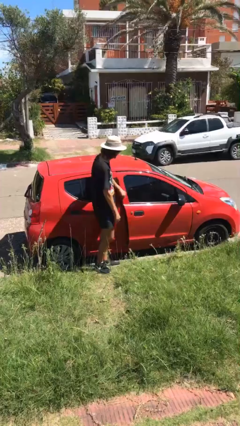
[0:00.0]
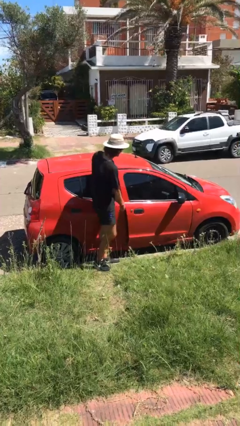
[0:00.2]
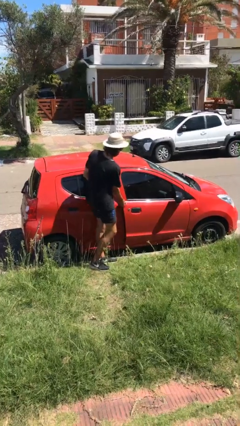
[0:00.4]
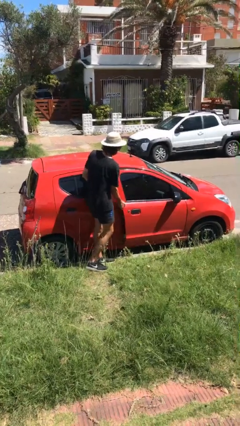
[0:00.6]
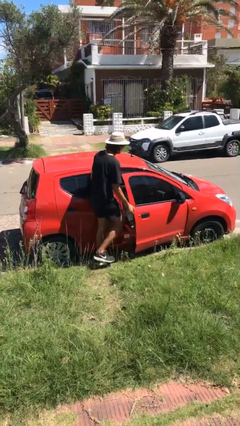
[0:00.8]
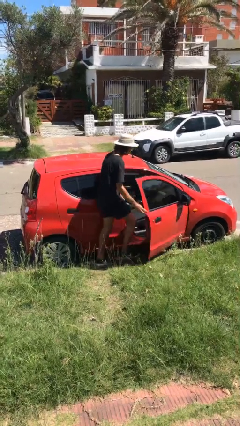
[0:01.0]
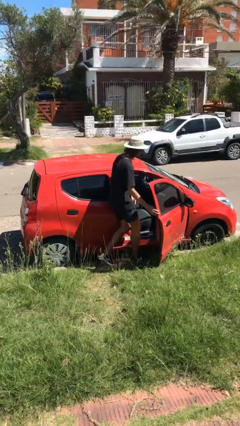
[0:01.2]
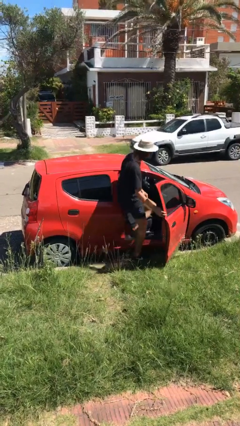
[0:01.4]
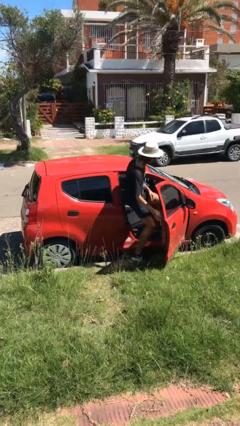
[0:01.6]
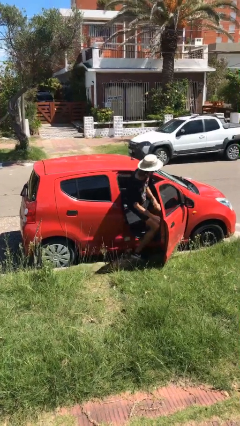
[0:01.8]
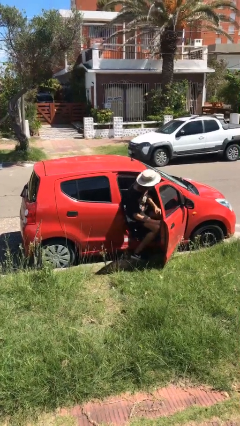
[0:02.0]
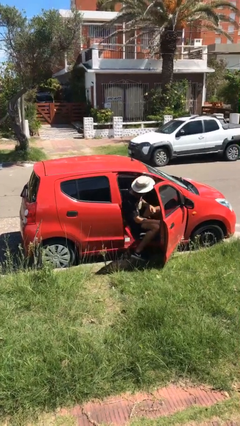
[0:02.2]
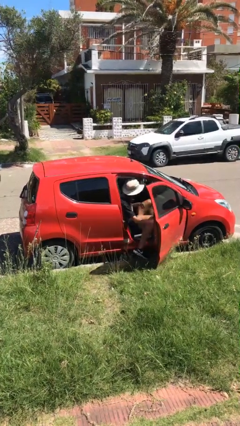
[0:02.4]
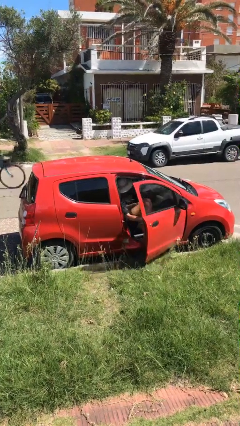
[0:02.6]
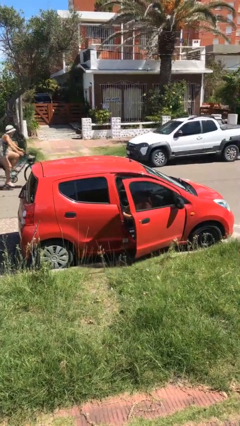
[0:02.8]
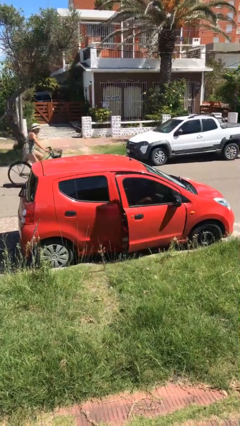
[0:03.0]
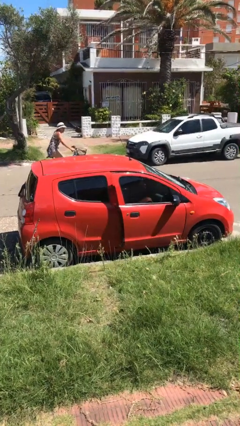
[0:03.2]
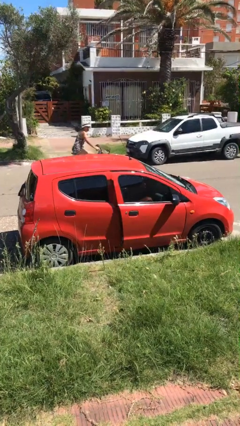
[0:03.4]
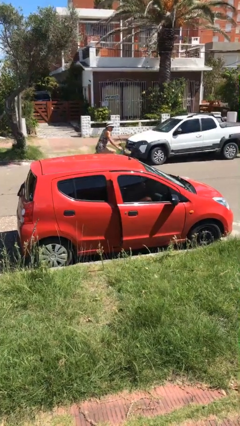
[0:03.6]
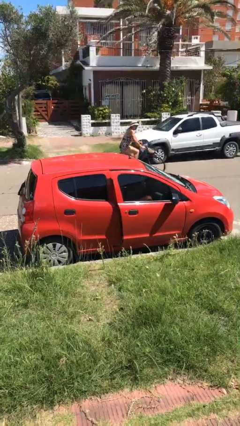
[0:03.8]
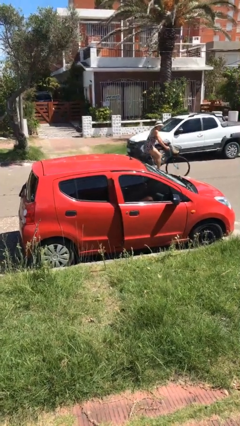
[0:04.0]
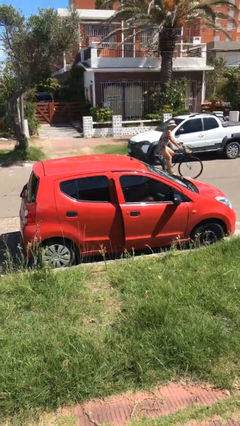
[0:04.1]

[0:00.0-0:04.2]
car picks up person

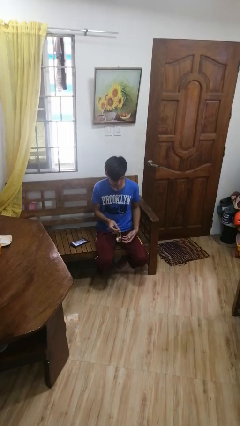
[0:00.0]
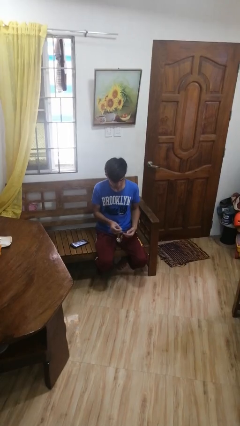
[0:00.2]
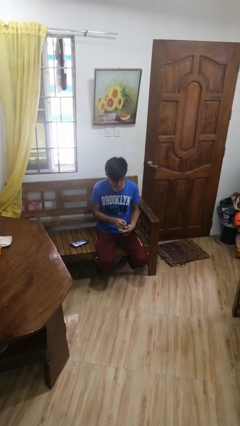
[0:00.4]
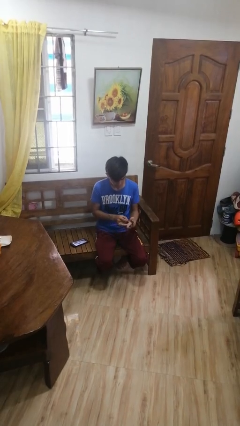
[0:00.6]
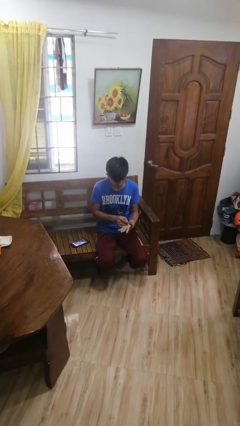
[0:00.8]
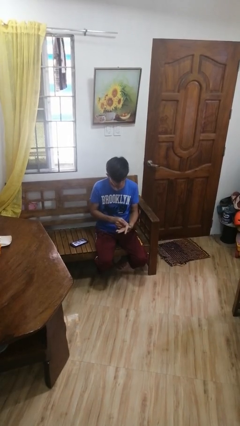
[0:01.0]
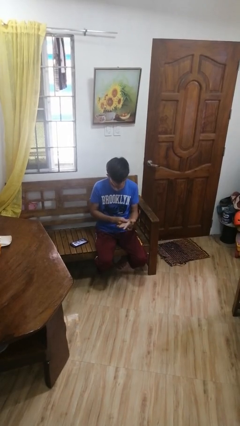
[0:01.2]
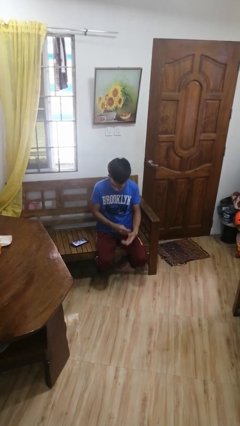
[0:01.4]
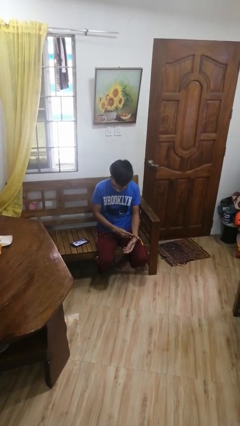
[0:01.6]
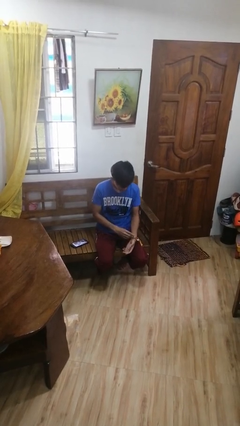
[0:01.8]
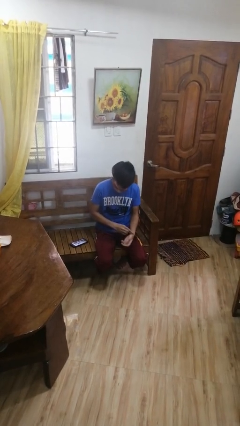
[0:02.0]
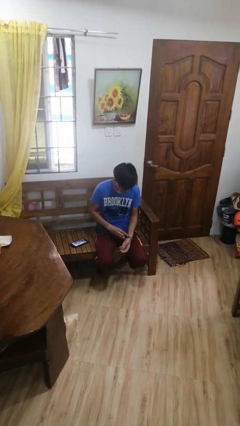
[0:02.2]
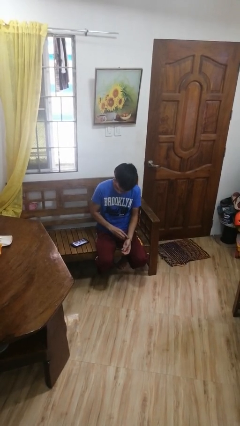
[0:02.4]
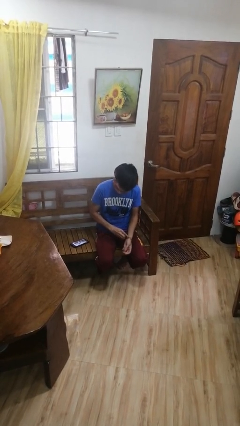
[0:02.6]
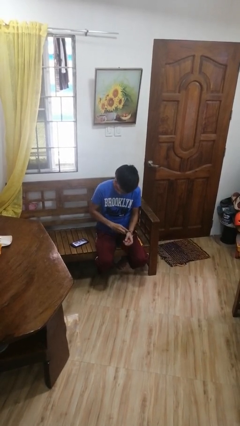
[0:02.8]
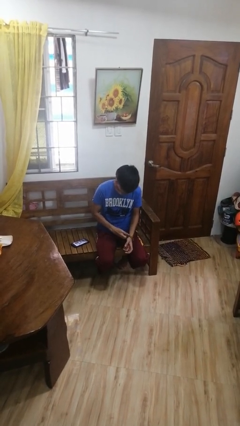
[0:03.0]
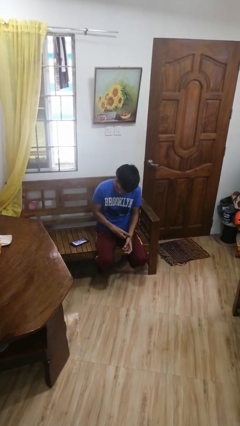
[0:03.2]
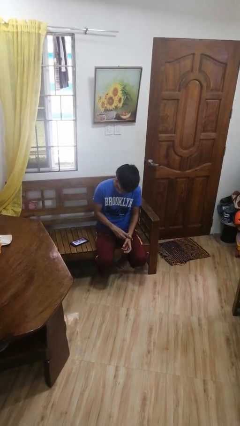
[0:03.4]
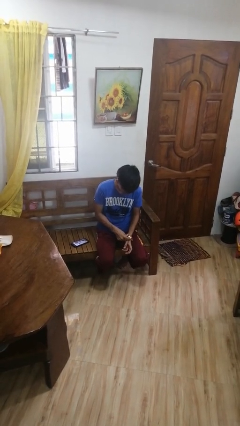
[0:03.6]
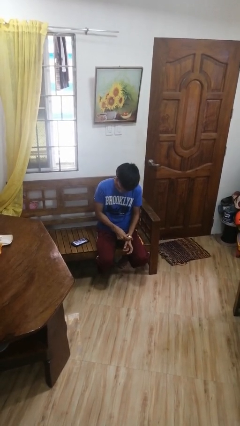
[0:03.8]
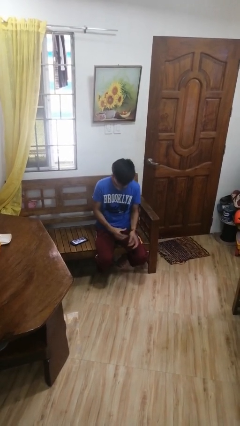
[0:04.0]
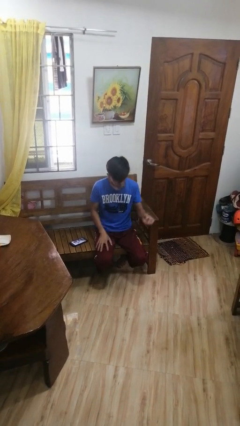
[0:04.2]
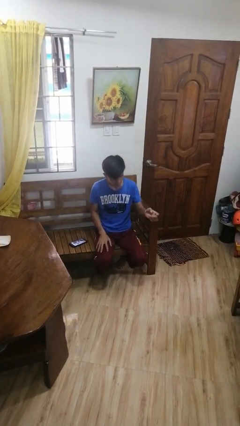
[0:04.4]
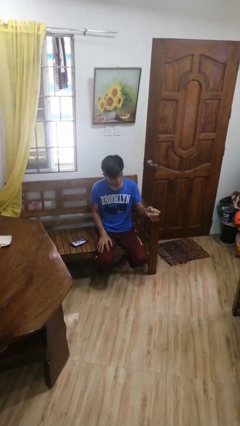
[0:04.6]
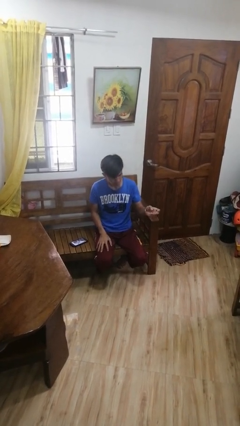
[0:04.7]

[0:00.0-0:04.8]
person puts on wristwatch

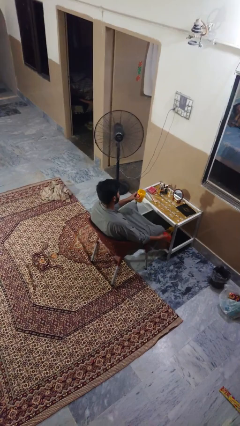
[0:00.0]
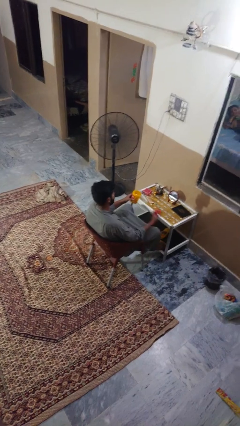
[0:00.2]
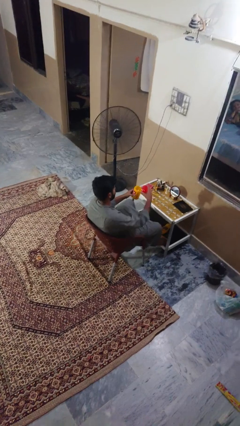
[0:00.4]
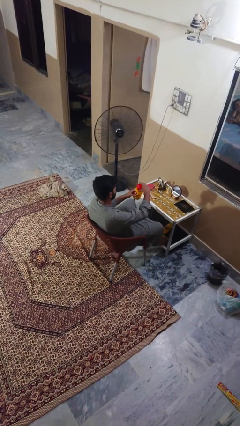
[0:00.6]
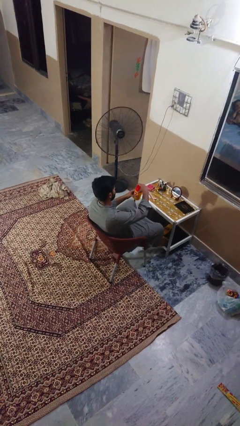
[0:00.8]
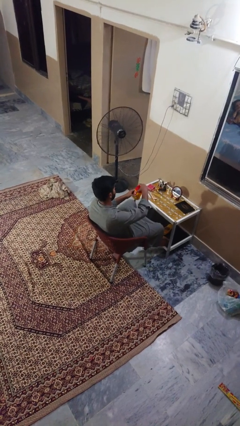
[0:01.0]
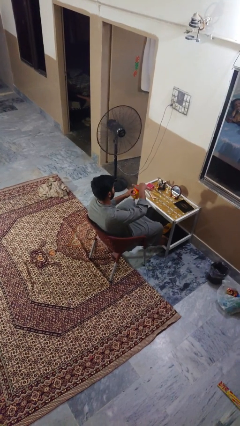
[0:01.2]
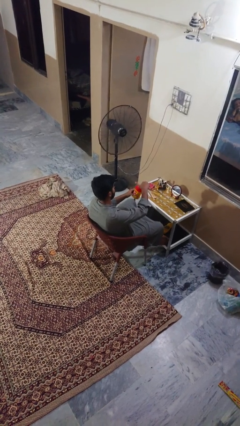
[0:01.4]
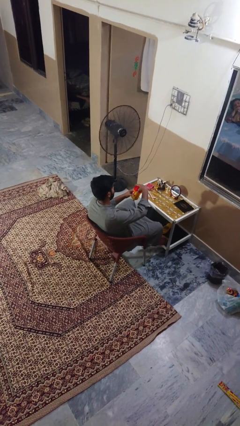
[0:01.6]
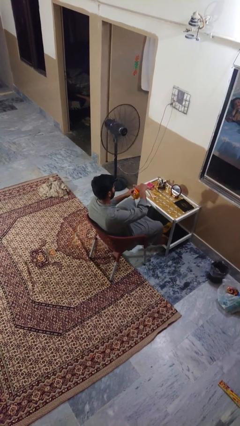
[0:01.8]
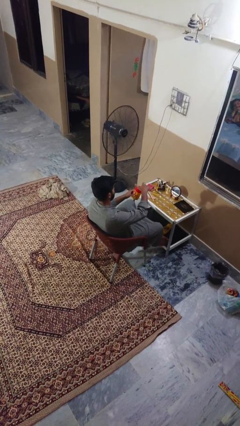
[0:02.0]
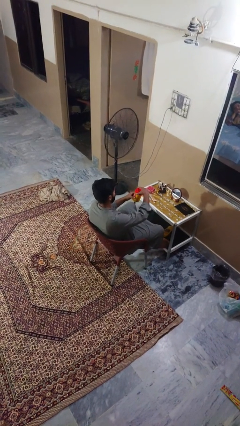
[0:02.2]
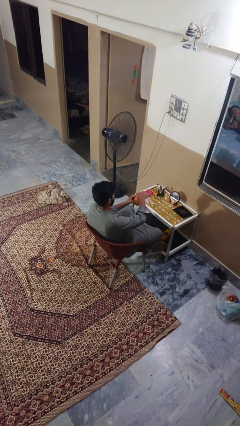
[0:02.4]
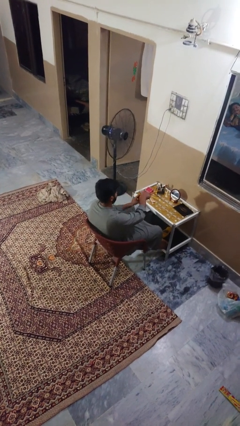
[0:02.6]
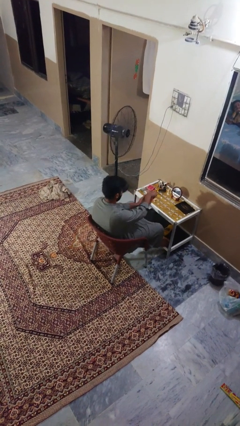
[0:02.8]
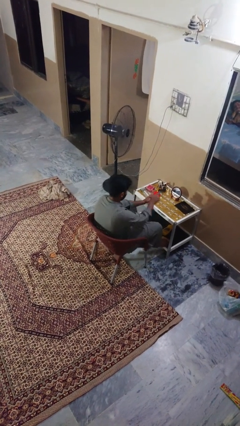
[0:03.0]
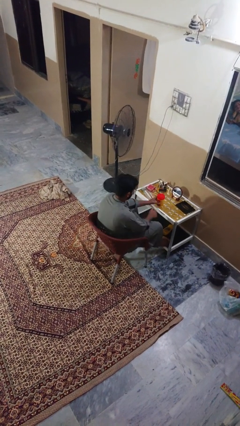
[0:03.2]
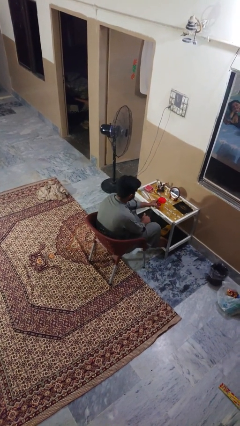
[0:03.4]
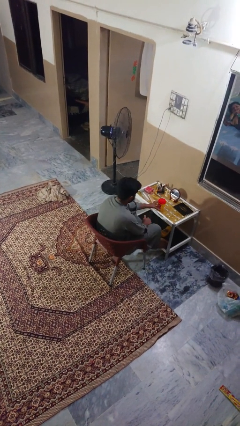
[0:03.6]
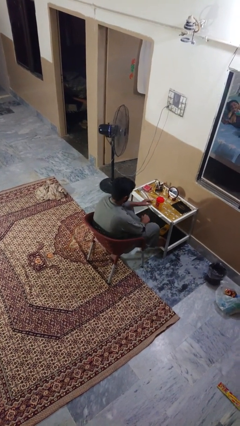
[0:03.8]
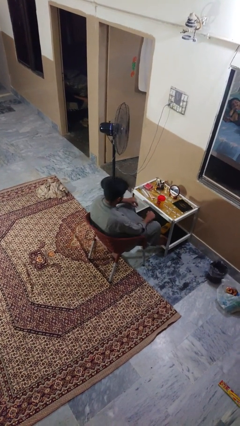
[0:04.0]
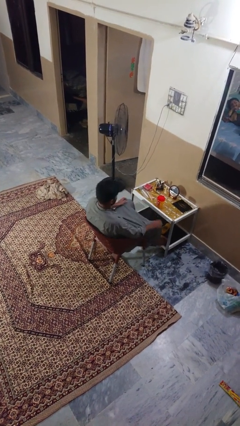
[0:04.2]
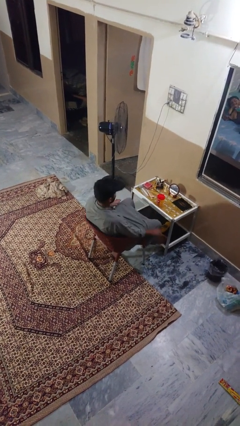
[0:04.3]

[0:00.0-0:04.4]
person closes jar

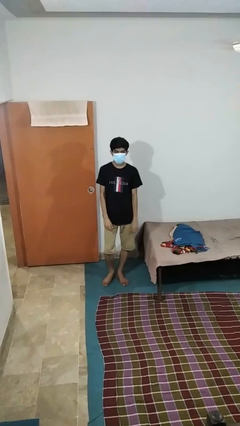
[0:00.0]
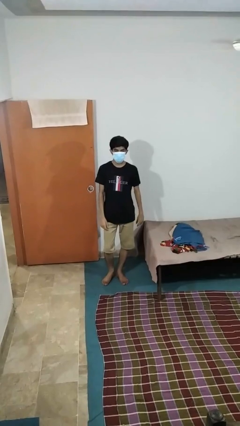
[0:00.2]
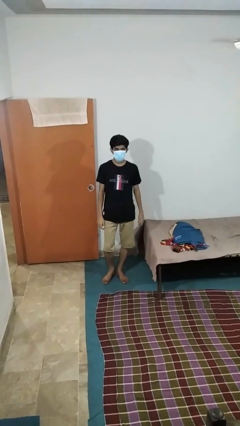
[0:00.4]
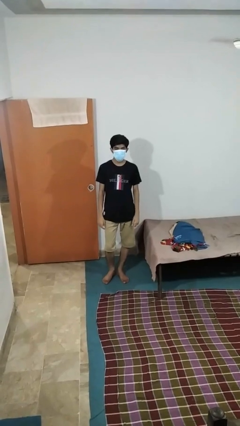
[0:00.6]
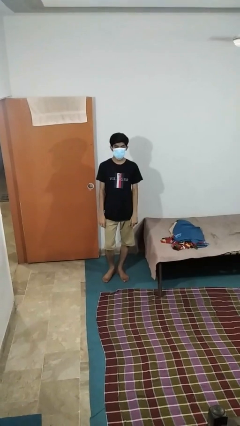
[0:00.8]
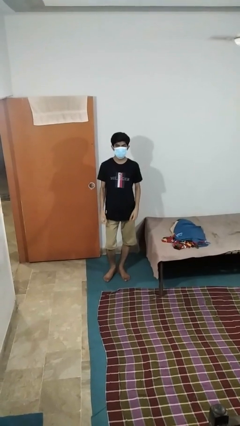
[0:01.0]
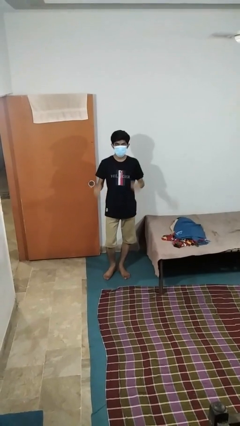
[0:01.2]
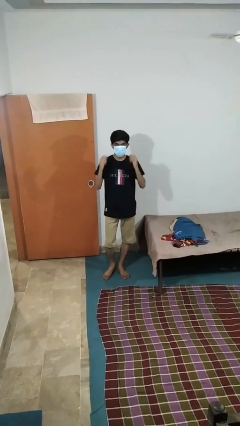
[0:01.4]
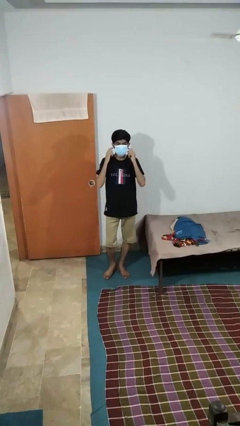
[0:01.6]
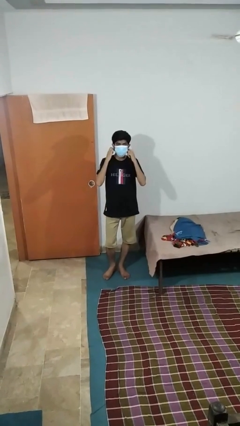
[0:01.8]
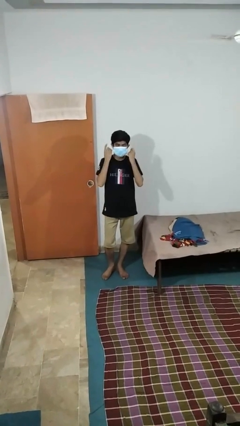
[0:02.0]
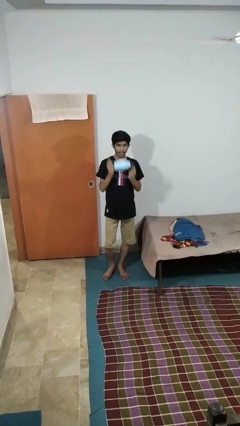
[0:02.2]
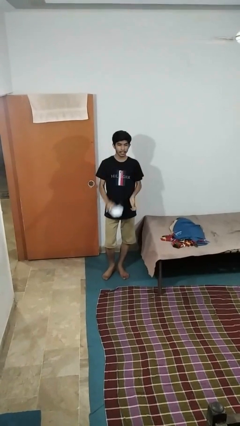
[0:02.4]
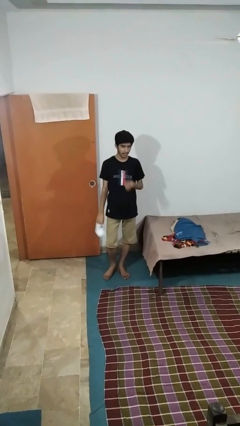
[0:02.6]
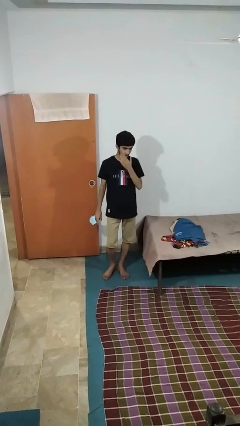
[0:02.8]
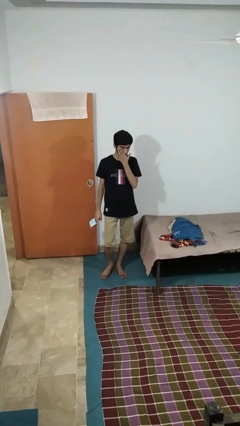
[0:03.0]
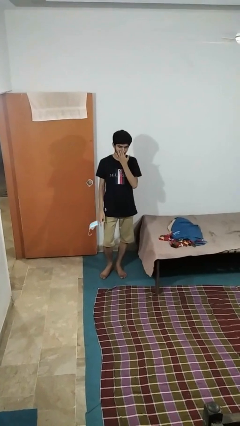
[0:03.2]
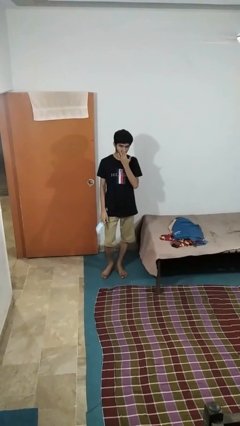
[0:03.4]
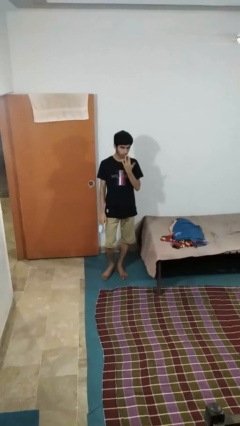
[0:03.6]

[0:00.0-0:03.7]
person takes off facemask

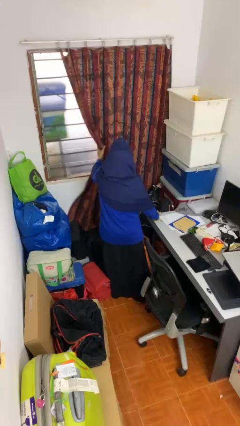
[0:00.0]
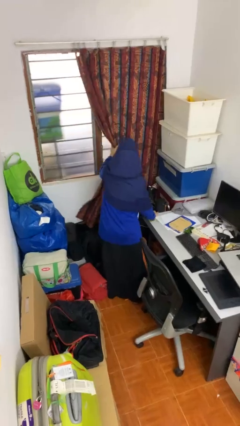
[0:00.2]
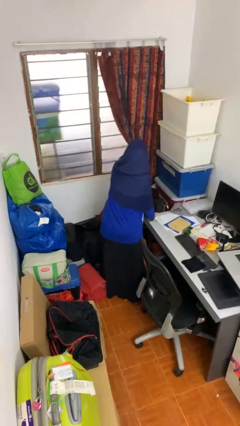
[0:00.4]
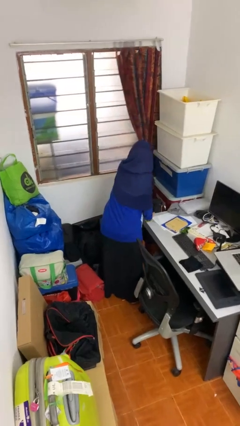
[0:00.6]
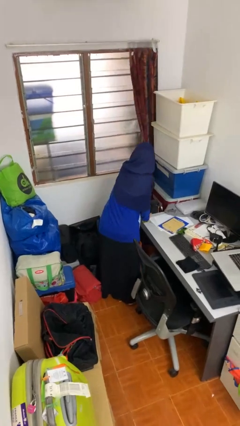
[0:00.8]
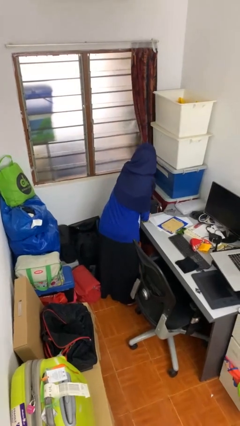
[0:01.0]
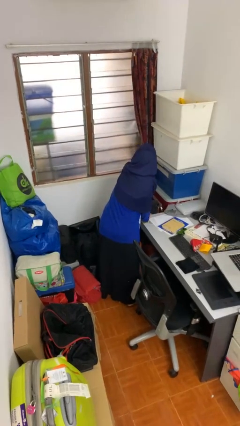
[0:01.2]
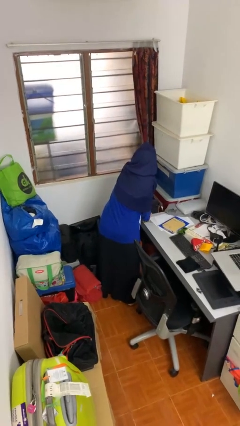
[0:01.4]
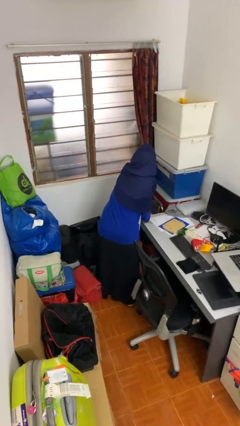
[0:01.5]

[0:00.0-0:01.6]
person opens curtains
